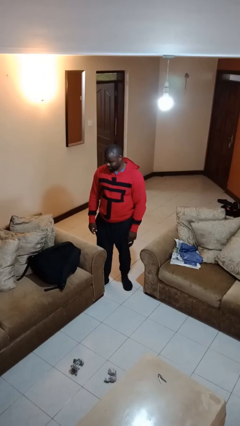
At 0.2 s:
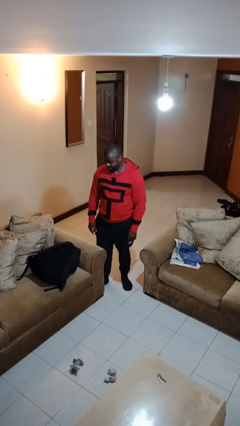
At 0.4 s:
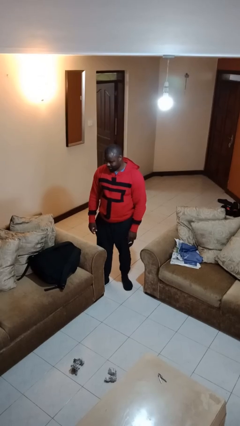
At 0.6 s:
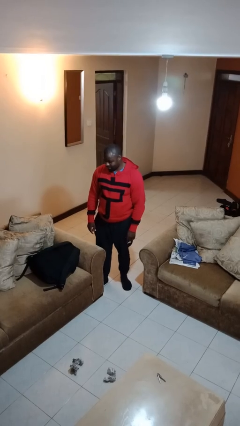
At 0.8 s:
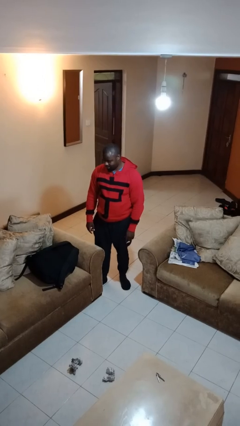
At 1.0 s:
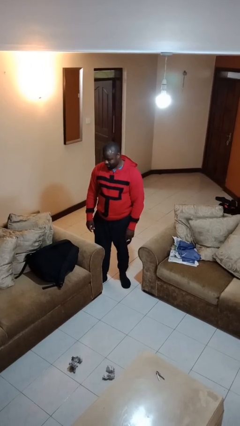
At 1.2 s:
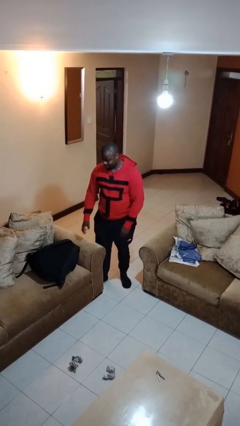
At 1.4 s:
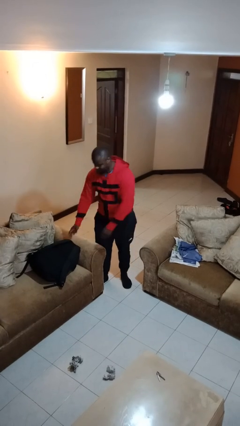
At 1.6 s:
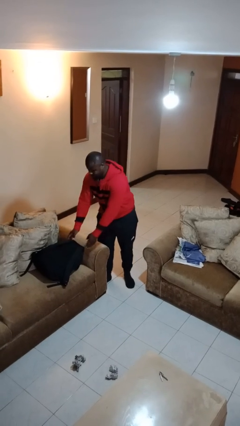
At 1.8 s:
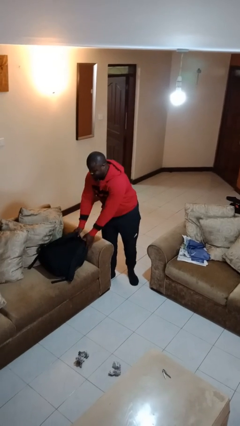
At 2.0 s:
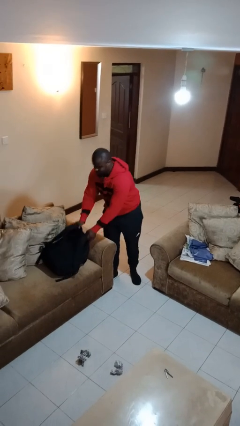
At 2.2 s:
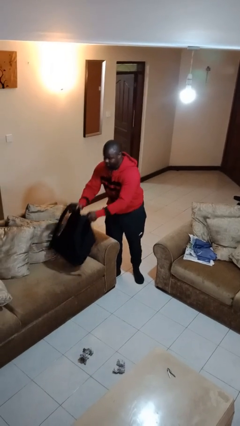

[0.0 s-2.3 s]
person picks up object from couch

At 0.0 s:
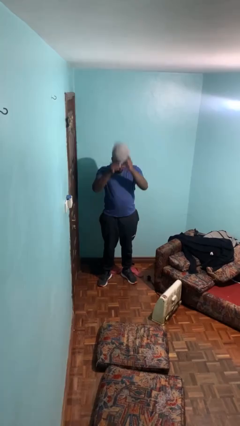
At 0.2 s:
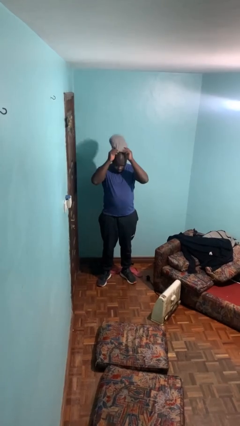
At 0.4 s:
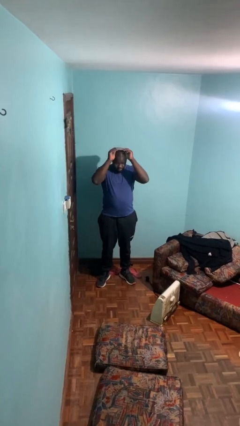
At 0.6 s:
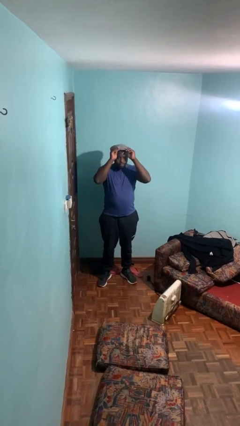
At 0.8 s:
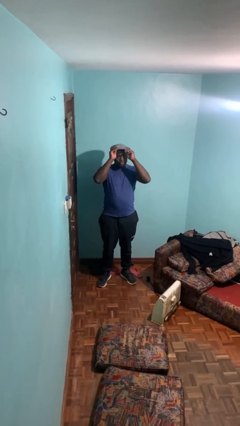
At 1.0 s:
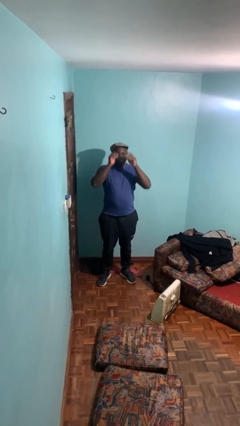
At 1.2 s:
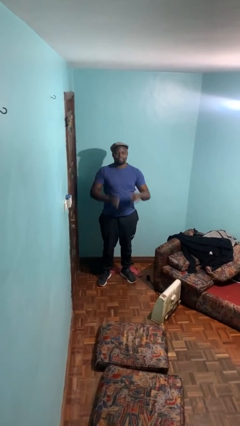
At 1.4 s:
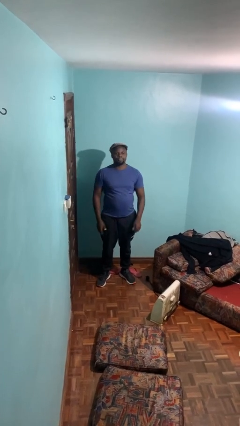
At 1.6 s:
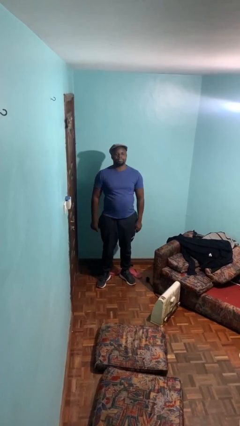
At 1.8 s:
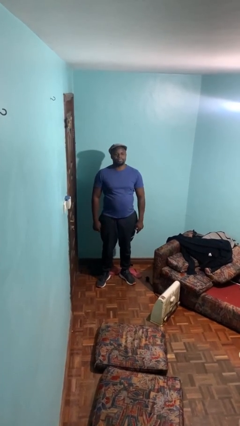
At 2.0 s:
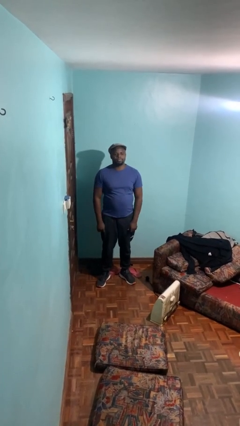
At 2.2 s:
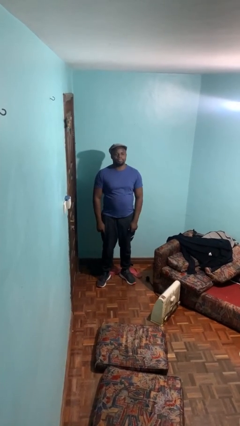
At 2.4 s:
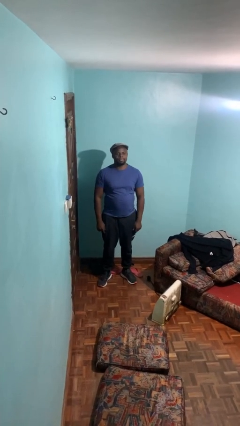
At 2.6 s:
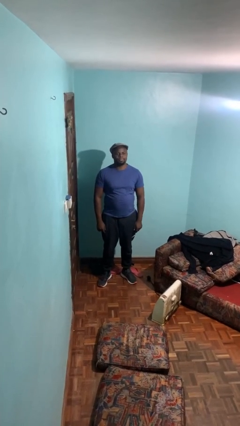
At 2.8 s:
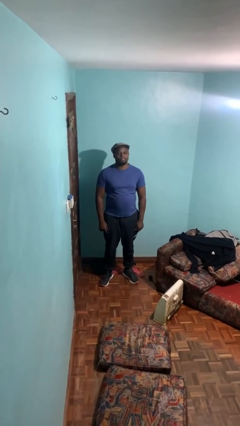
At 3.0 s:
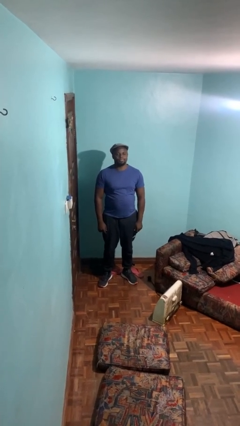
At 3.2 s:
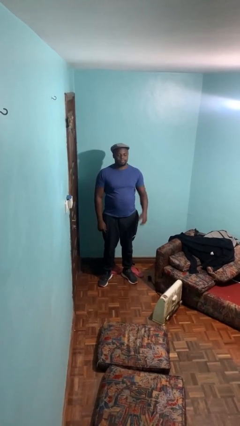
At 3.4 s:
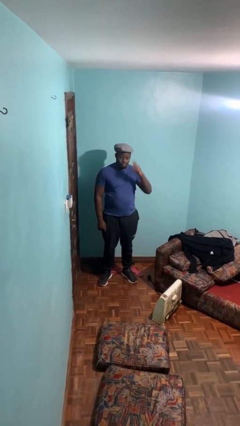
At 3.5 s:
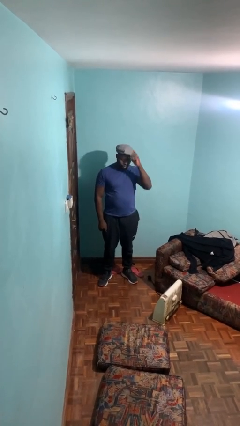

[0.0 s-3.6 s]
person puts on hat

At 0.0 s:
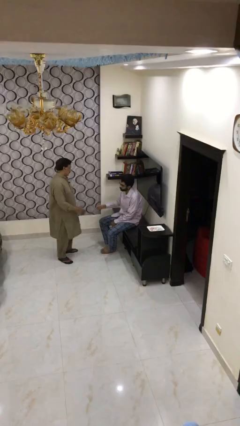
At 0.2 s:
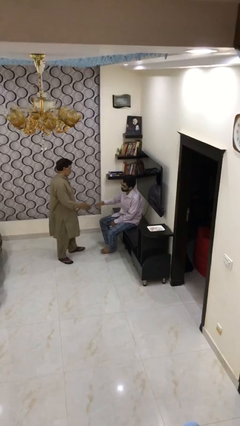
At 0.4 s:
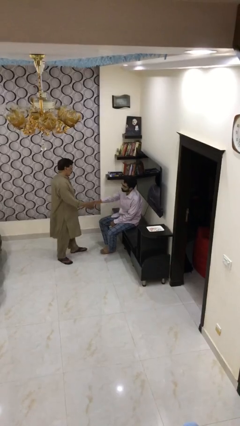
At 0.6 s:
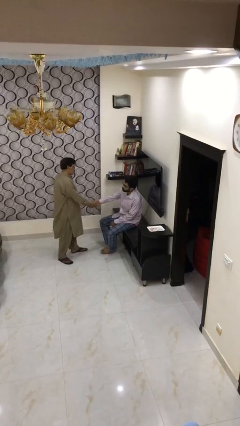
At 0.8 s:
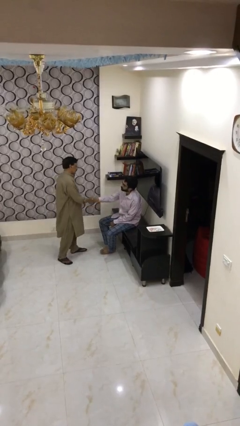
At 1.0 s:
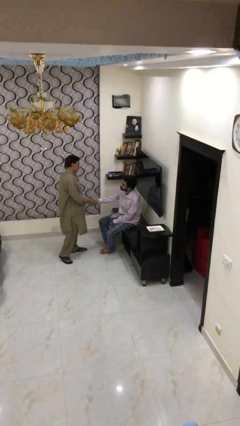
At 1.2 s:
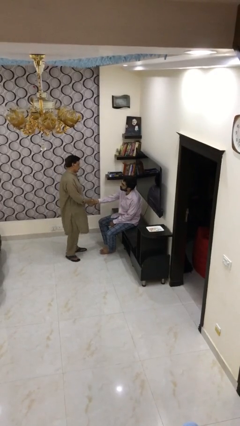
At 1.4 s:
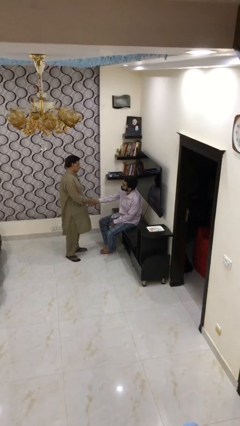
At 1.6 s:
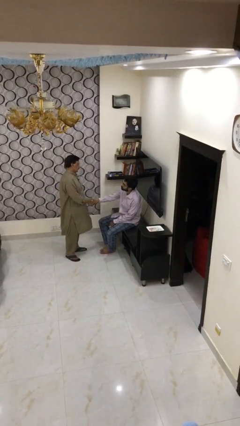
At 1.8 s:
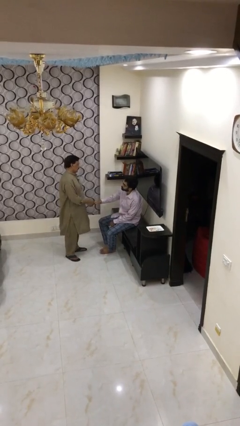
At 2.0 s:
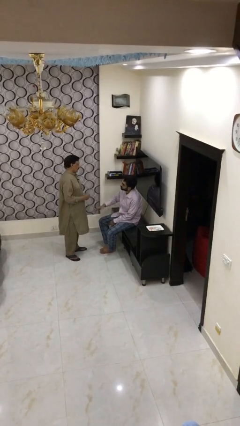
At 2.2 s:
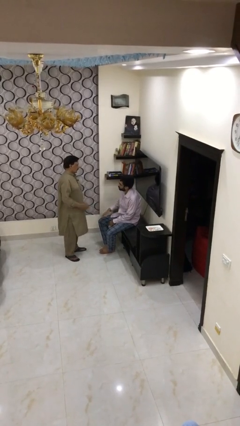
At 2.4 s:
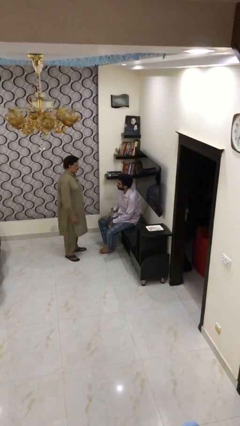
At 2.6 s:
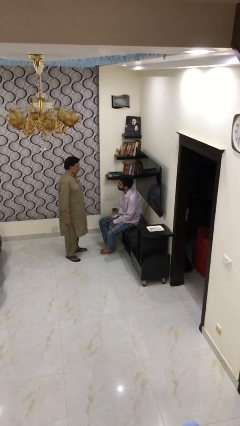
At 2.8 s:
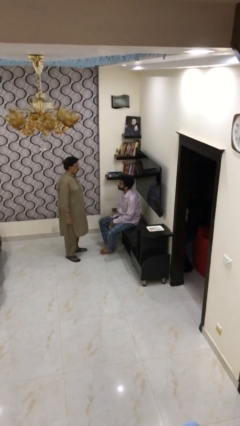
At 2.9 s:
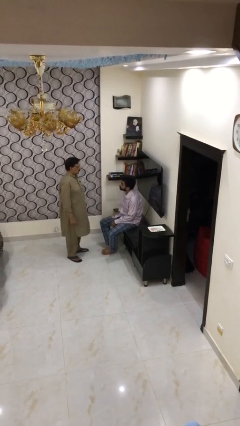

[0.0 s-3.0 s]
person shakes hand

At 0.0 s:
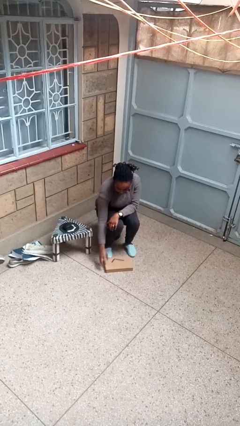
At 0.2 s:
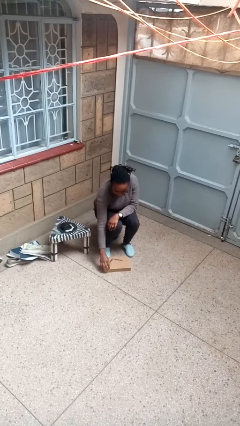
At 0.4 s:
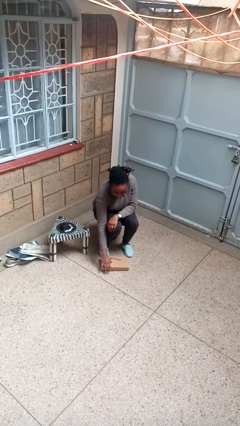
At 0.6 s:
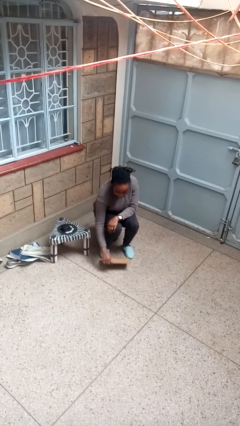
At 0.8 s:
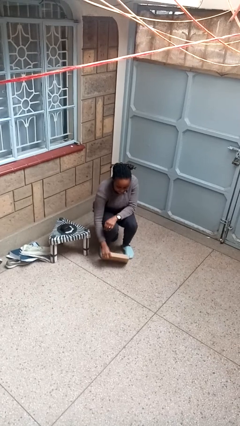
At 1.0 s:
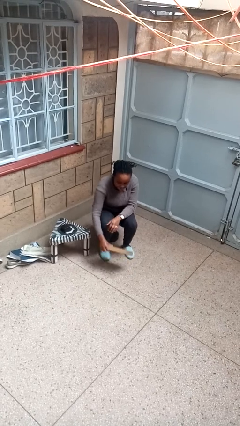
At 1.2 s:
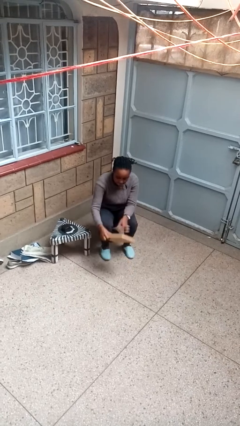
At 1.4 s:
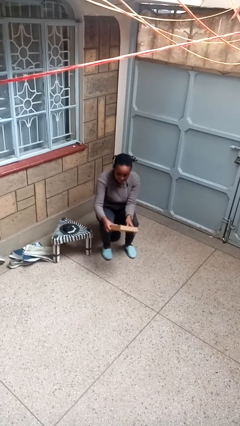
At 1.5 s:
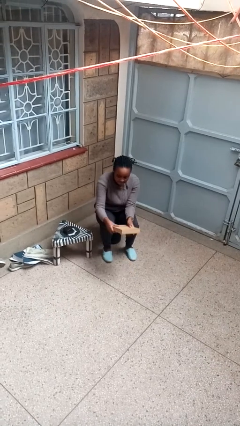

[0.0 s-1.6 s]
person picks up object from floor

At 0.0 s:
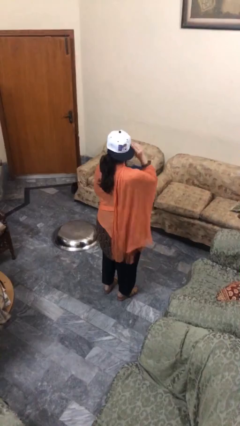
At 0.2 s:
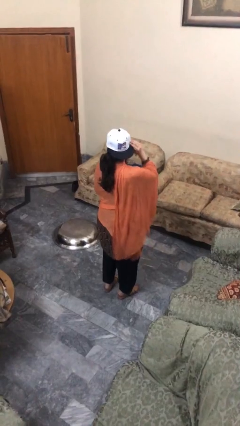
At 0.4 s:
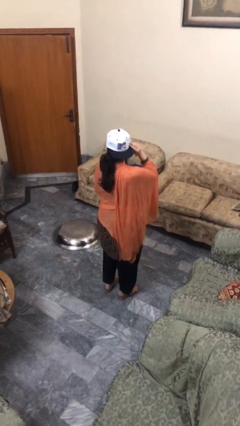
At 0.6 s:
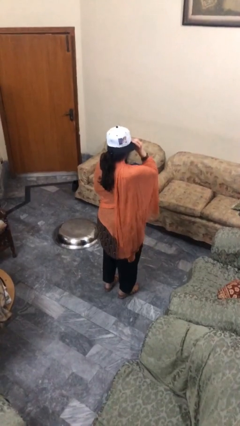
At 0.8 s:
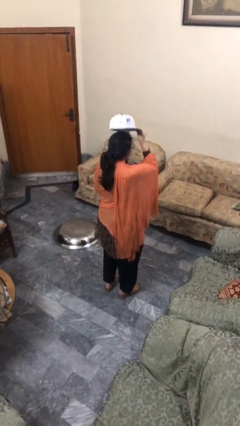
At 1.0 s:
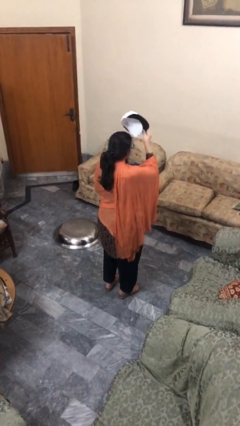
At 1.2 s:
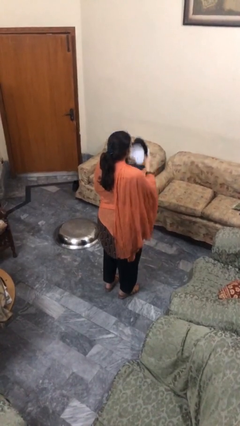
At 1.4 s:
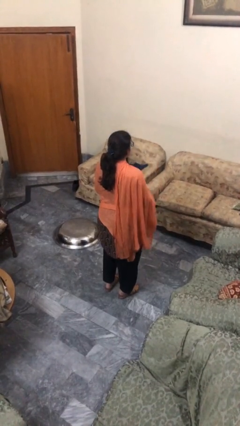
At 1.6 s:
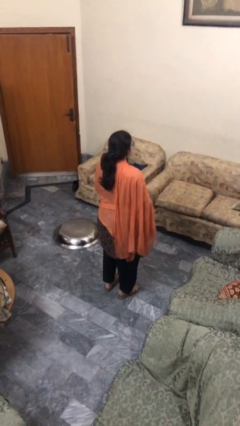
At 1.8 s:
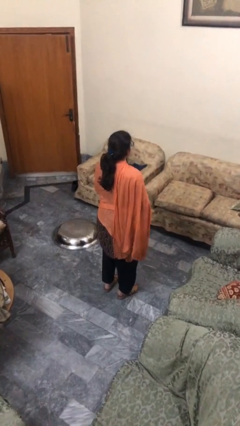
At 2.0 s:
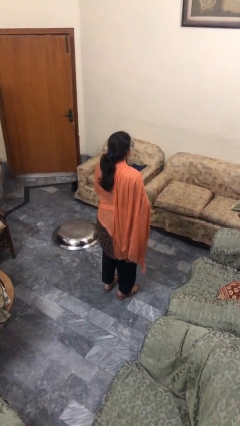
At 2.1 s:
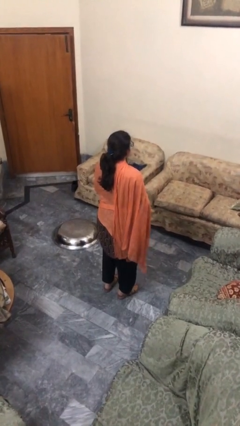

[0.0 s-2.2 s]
person takes off hat

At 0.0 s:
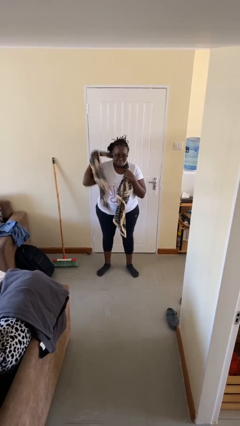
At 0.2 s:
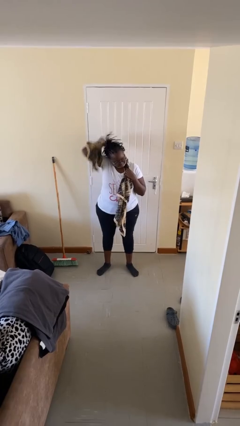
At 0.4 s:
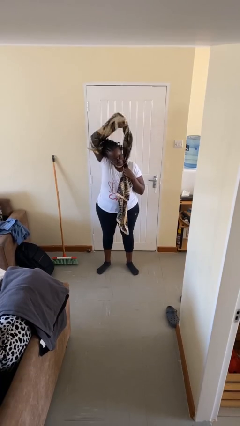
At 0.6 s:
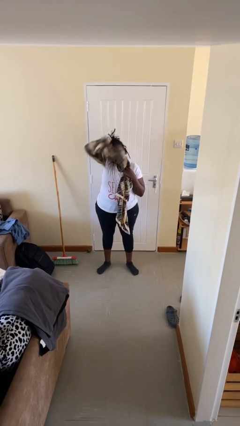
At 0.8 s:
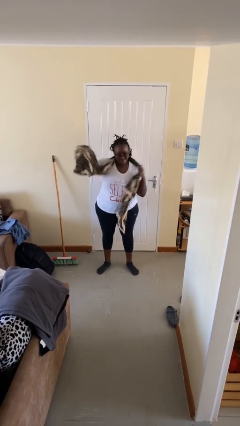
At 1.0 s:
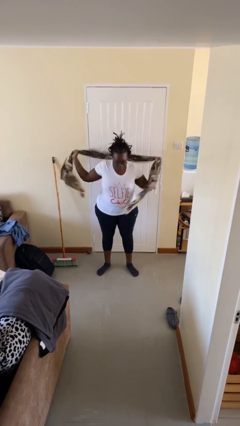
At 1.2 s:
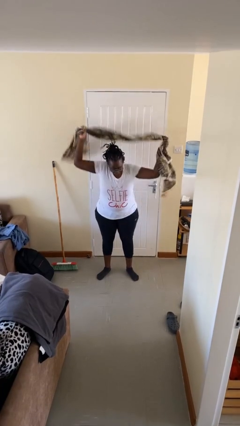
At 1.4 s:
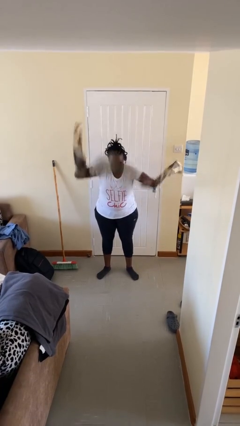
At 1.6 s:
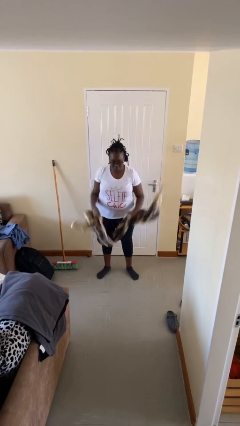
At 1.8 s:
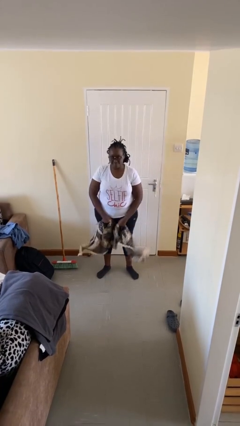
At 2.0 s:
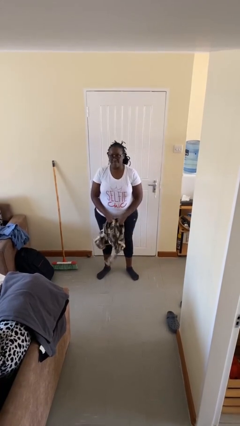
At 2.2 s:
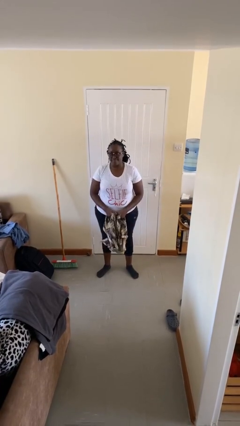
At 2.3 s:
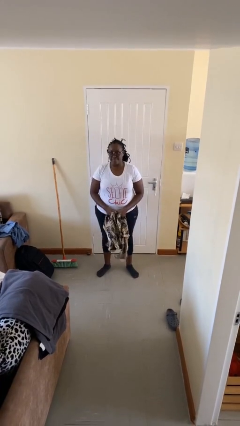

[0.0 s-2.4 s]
person takes off scarf

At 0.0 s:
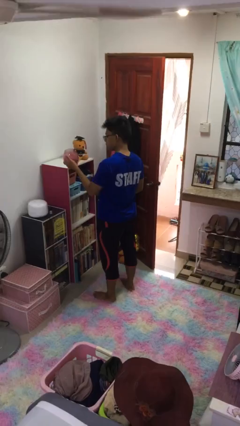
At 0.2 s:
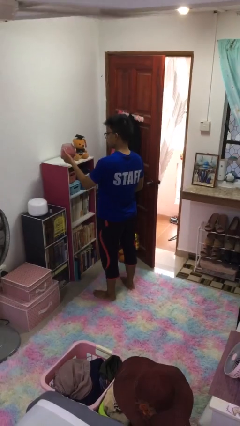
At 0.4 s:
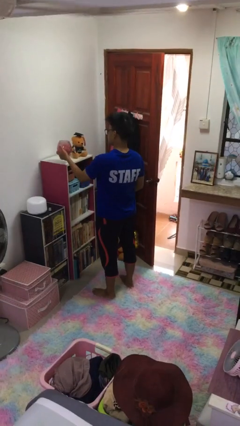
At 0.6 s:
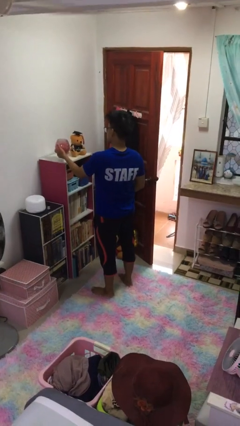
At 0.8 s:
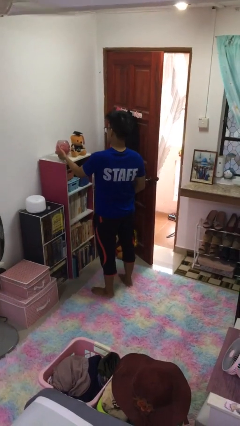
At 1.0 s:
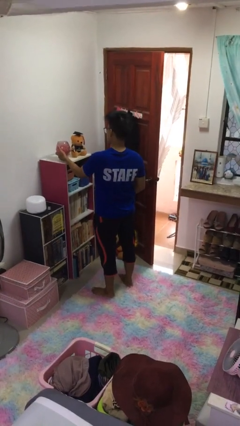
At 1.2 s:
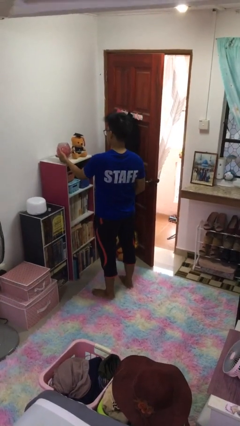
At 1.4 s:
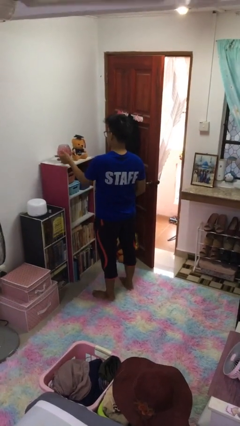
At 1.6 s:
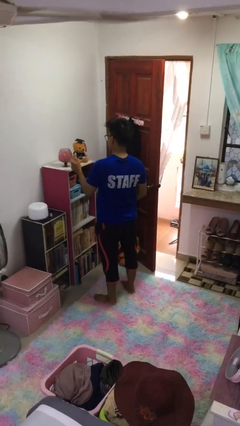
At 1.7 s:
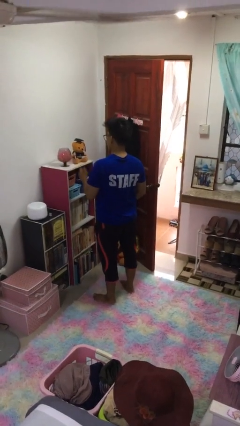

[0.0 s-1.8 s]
person puts down object on shelf

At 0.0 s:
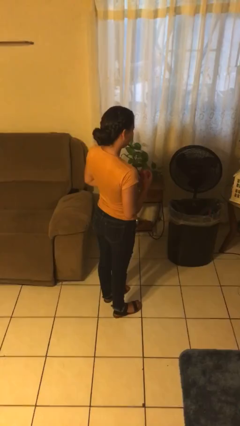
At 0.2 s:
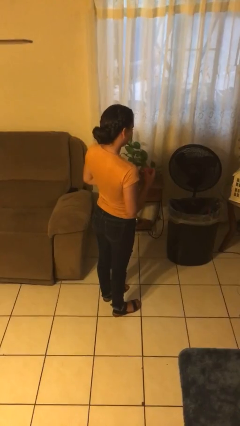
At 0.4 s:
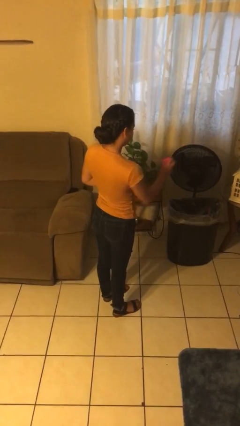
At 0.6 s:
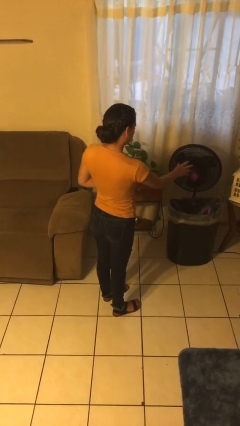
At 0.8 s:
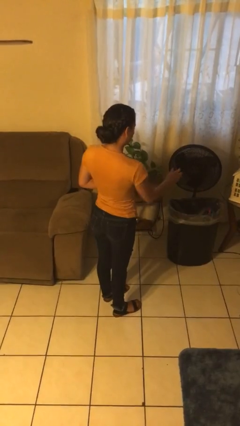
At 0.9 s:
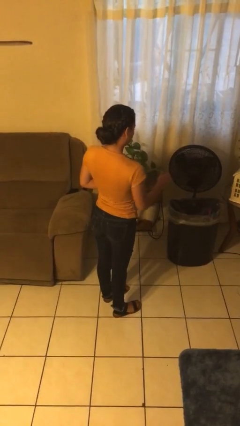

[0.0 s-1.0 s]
person discards trash
